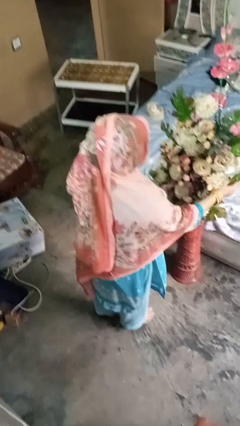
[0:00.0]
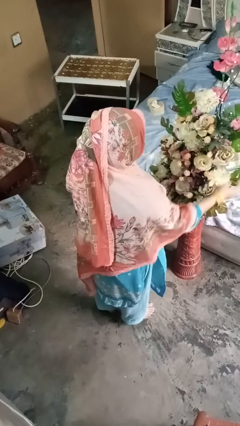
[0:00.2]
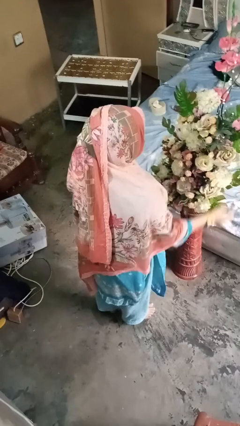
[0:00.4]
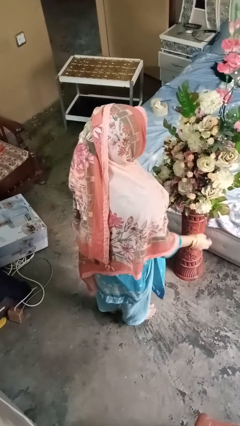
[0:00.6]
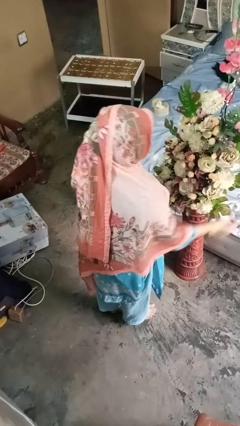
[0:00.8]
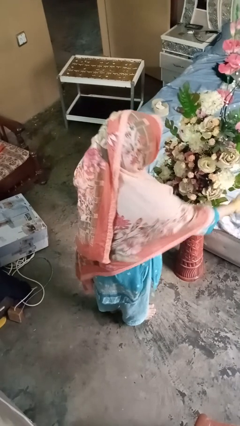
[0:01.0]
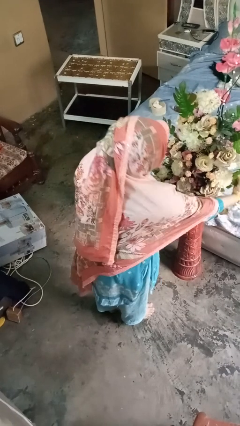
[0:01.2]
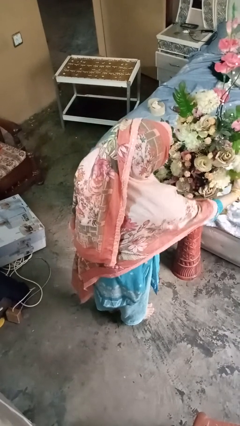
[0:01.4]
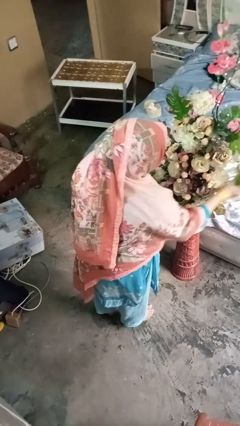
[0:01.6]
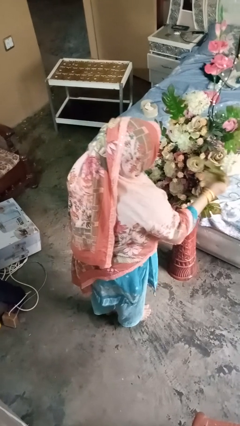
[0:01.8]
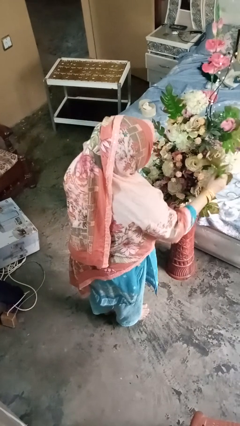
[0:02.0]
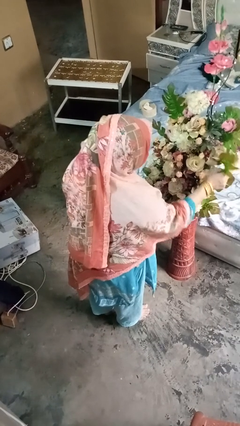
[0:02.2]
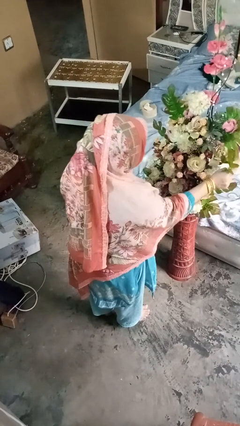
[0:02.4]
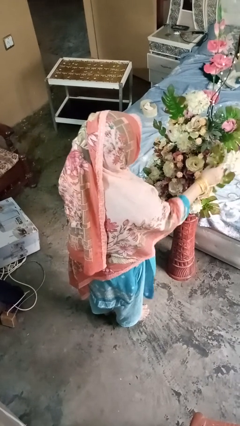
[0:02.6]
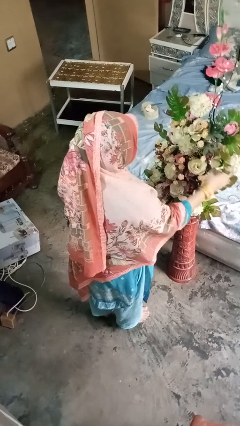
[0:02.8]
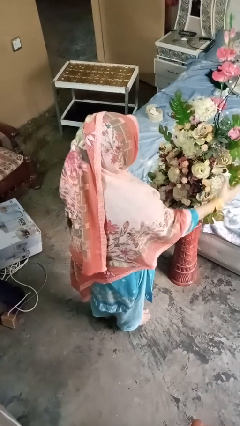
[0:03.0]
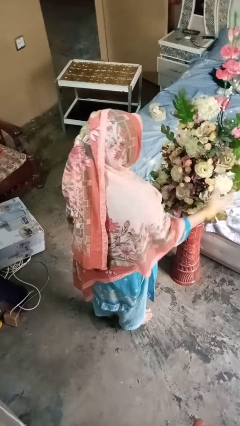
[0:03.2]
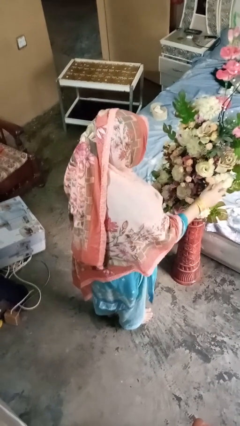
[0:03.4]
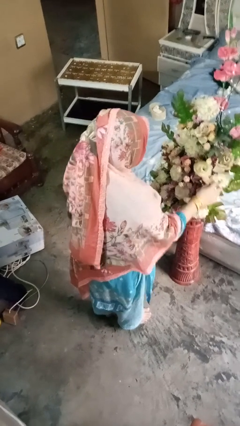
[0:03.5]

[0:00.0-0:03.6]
person arranges flowers in vase

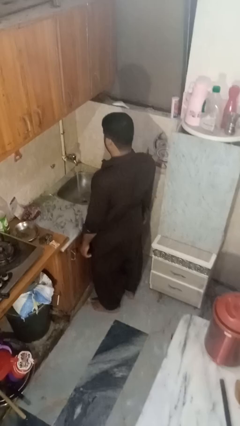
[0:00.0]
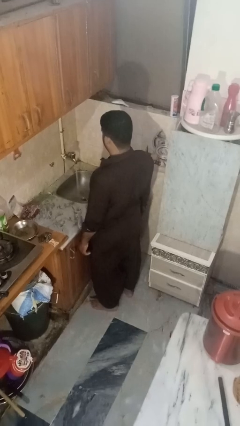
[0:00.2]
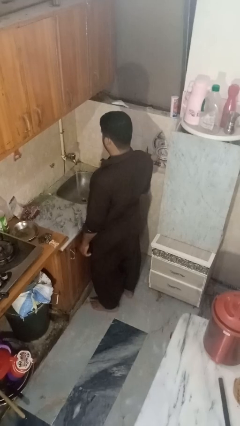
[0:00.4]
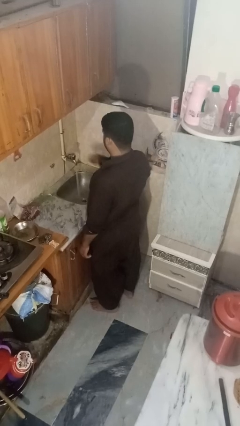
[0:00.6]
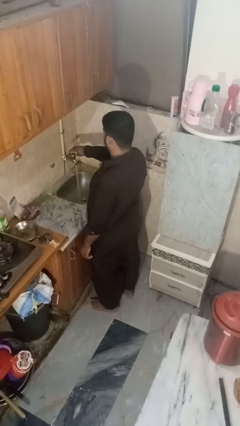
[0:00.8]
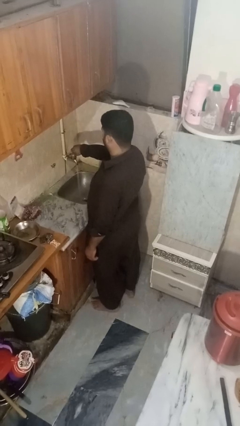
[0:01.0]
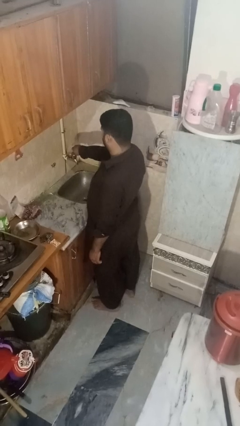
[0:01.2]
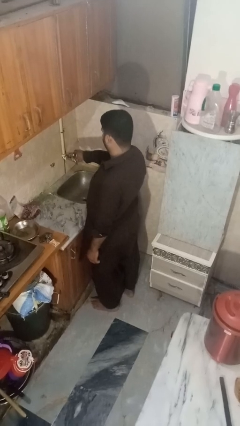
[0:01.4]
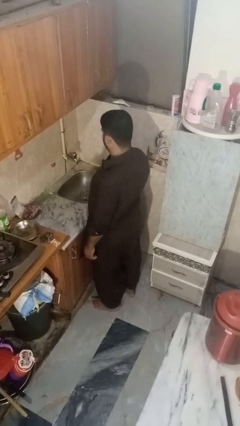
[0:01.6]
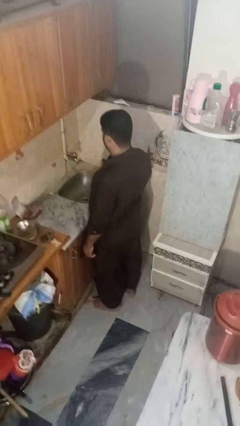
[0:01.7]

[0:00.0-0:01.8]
person turns off faucet

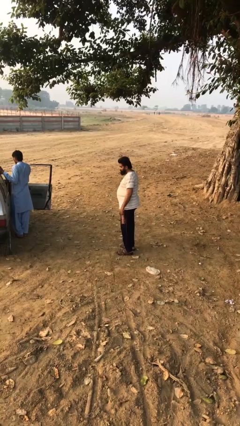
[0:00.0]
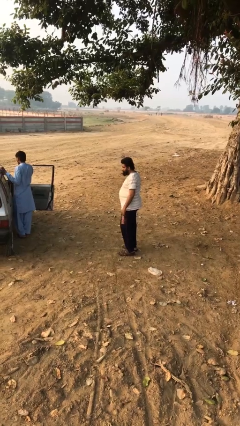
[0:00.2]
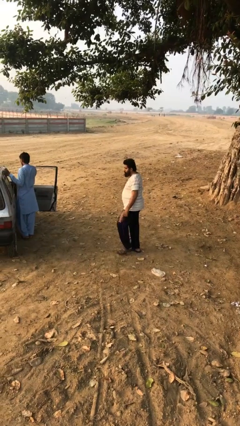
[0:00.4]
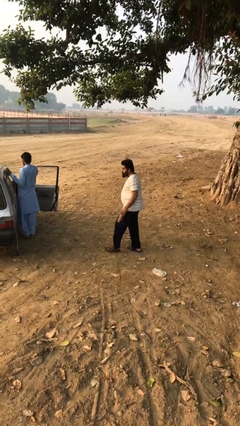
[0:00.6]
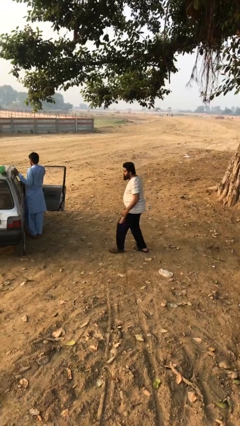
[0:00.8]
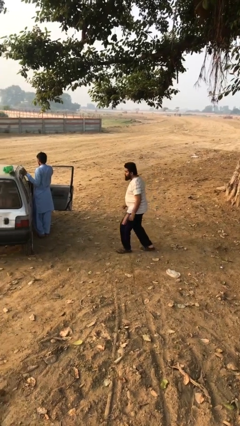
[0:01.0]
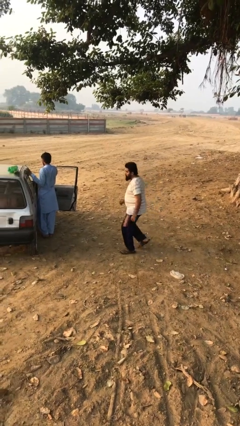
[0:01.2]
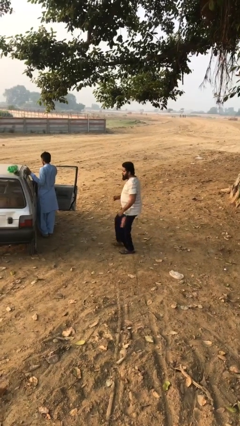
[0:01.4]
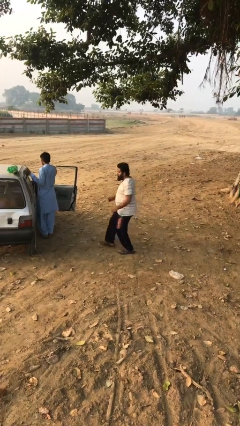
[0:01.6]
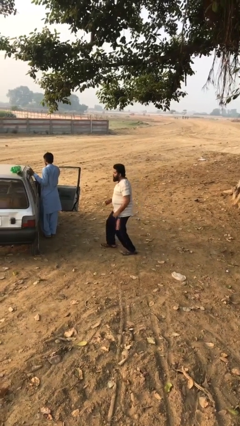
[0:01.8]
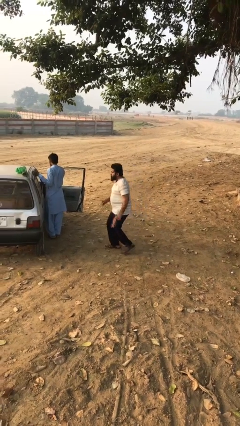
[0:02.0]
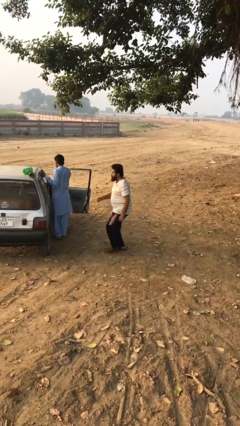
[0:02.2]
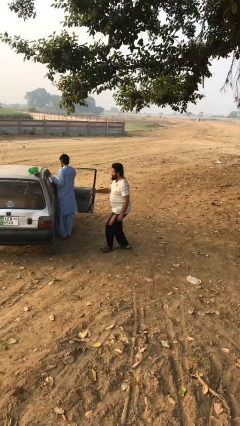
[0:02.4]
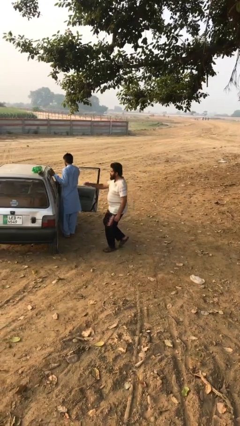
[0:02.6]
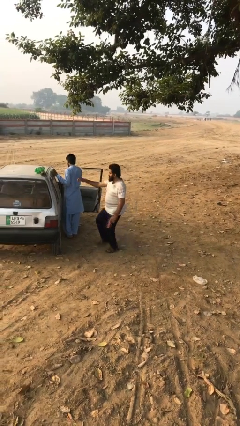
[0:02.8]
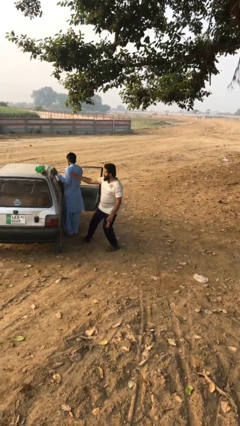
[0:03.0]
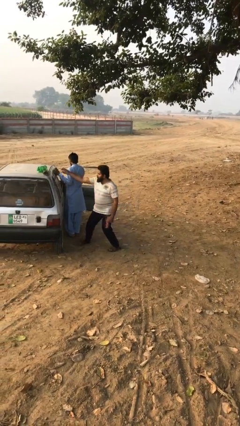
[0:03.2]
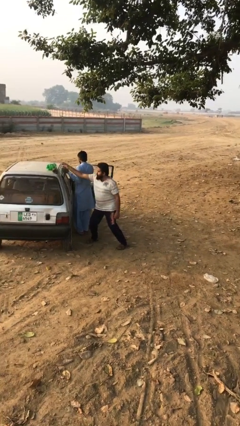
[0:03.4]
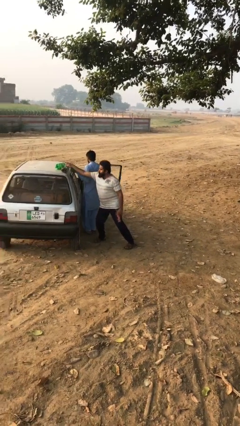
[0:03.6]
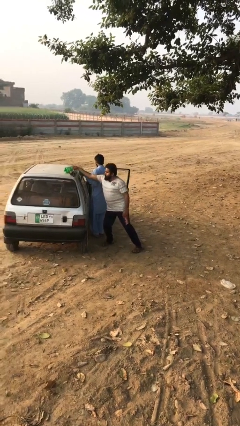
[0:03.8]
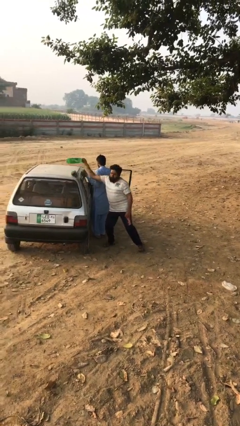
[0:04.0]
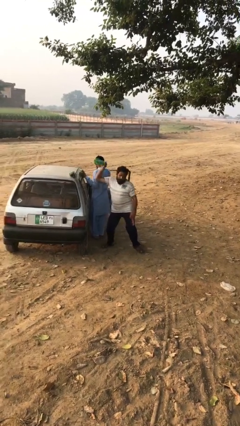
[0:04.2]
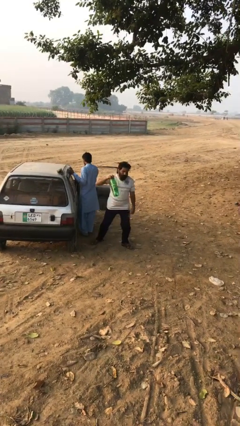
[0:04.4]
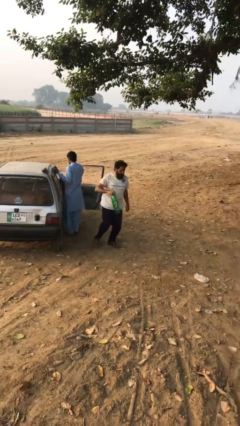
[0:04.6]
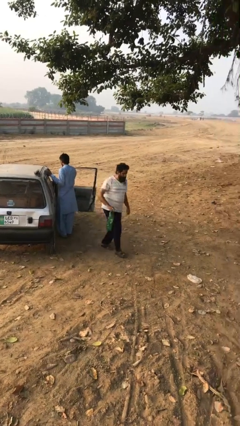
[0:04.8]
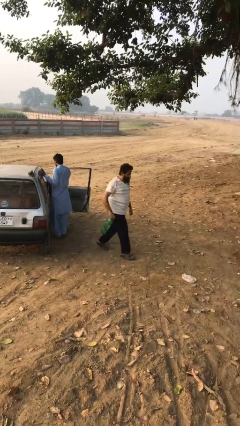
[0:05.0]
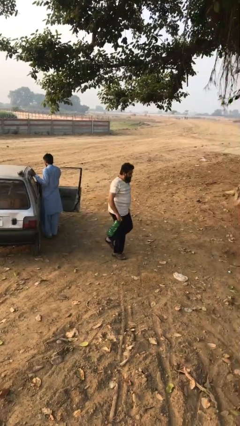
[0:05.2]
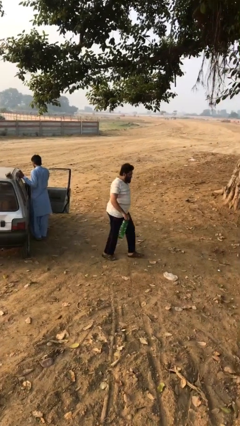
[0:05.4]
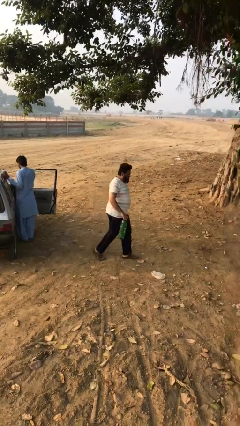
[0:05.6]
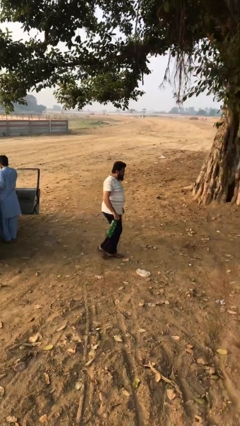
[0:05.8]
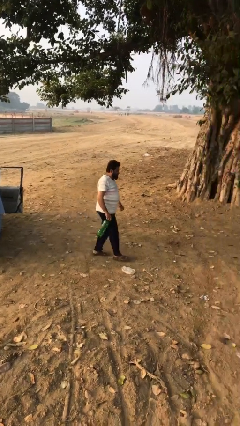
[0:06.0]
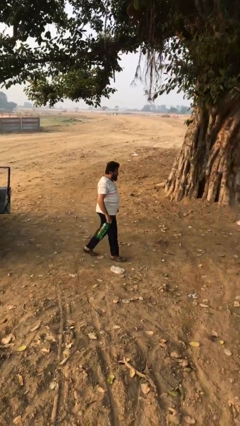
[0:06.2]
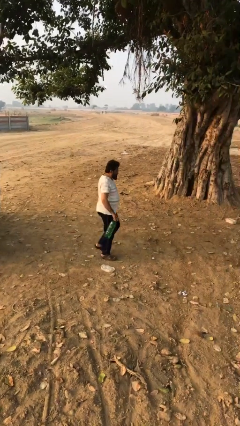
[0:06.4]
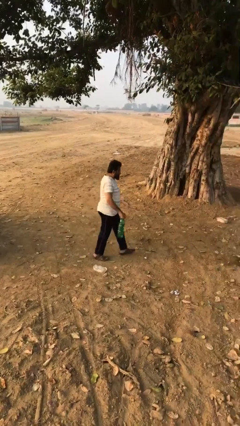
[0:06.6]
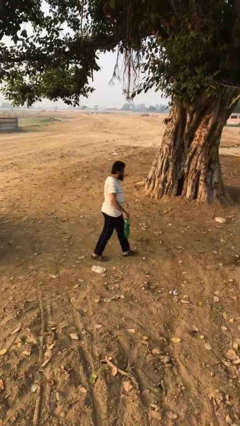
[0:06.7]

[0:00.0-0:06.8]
person steals object from person

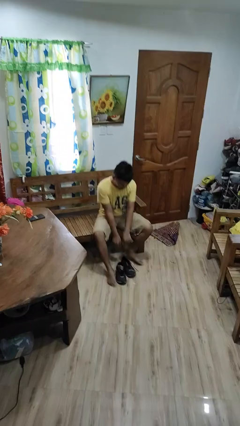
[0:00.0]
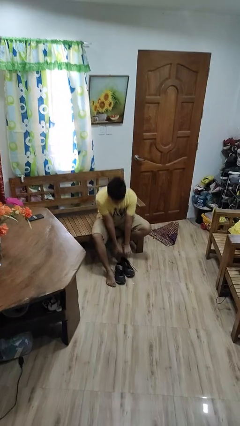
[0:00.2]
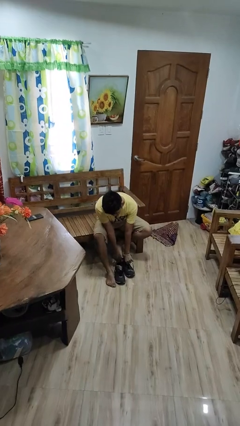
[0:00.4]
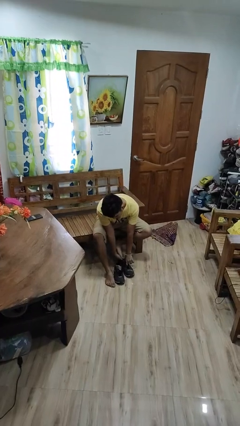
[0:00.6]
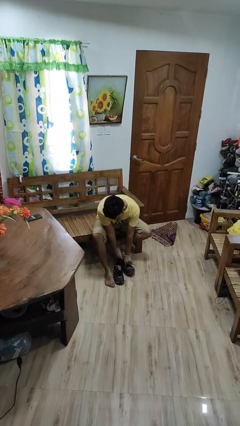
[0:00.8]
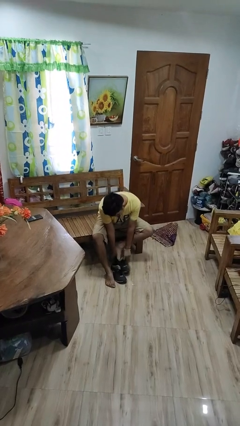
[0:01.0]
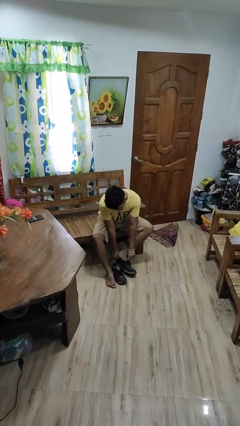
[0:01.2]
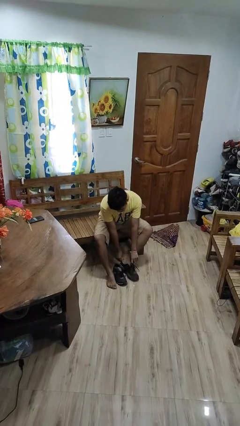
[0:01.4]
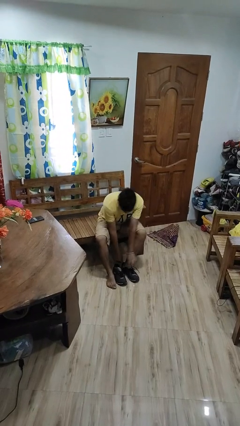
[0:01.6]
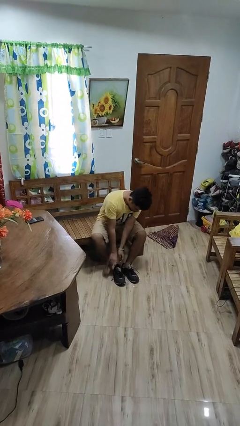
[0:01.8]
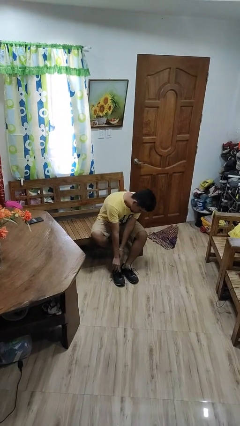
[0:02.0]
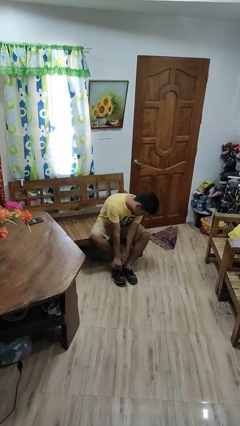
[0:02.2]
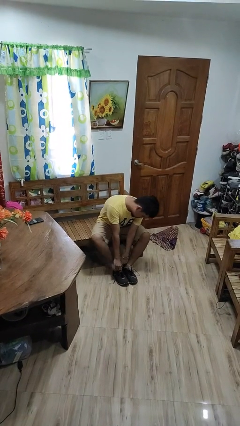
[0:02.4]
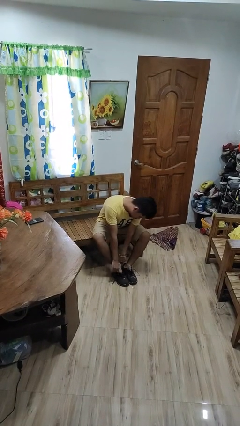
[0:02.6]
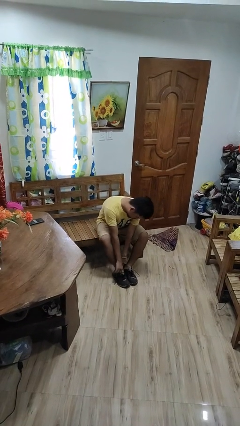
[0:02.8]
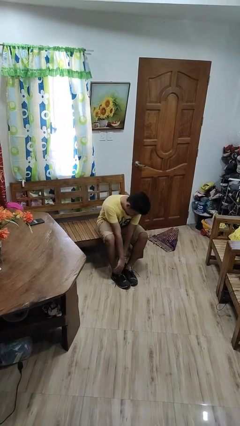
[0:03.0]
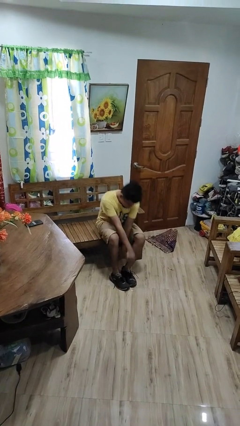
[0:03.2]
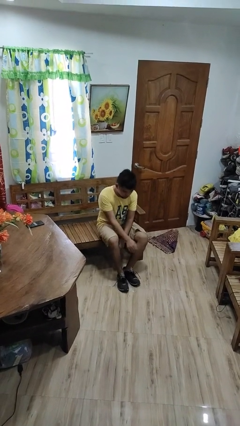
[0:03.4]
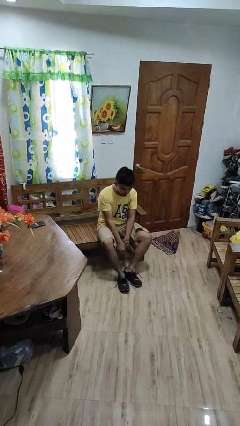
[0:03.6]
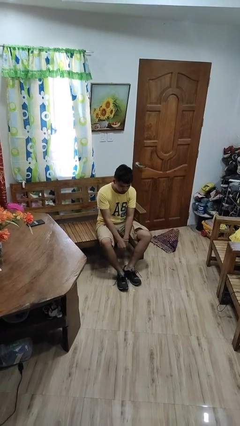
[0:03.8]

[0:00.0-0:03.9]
person puts on shoes

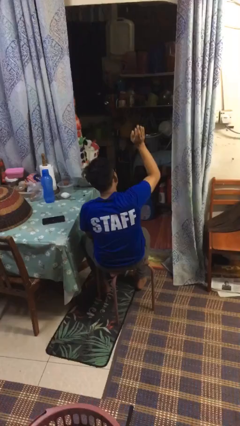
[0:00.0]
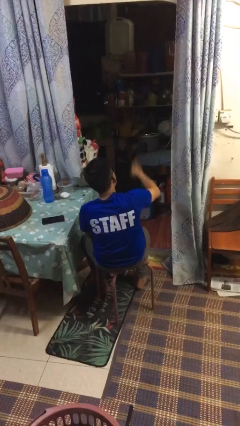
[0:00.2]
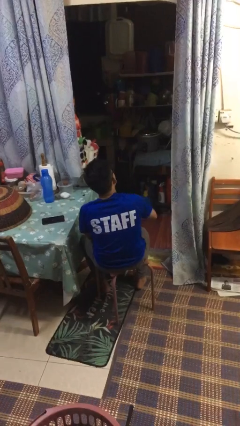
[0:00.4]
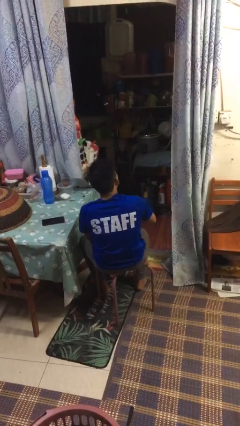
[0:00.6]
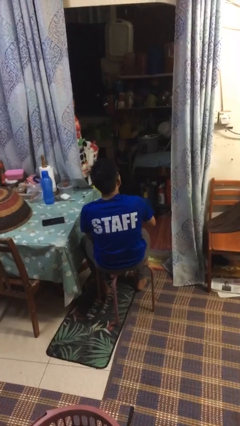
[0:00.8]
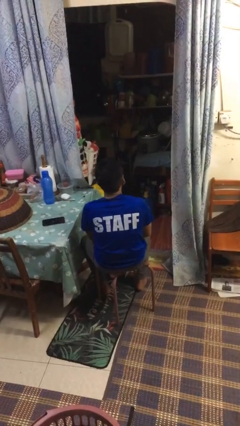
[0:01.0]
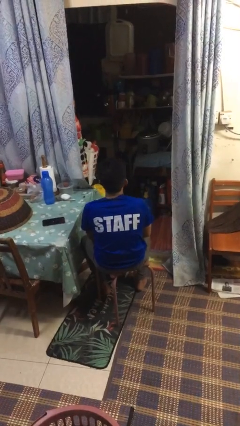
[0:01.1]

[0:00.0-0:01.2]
person gestures swipe down

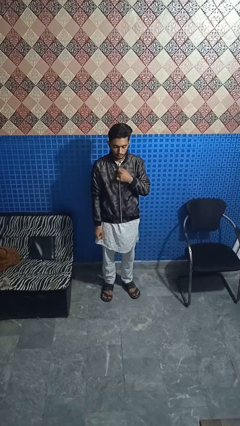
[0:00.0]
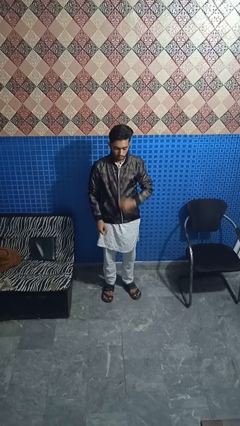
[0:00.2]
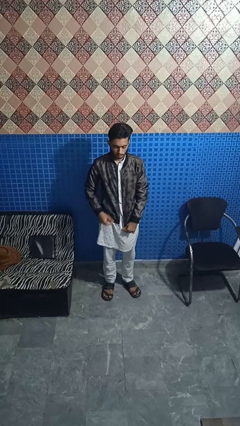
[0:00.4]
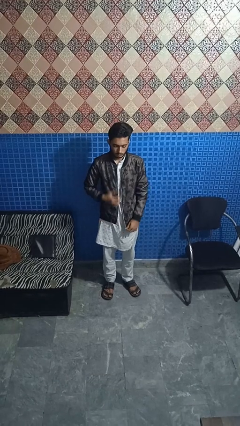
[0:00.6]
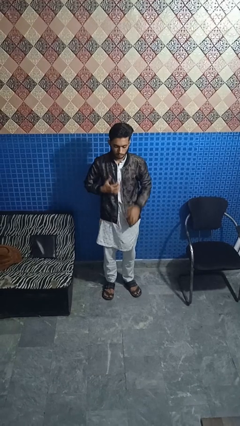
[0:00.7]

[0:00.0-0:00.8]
person unzips jacket
